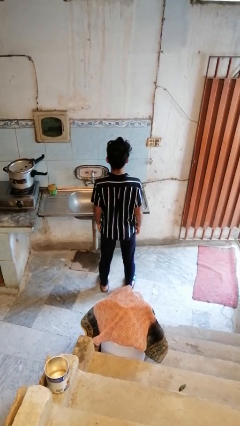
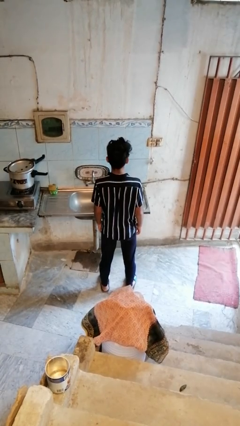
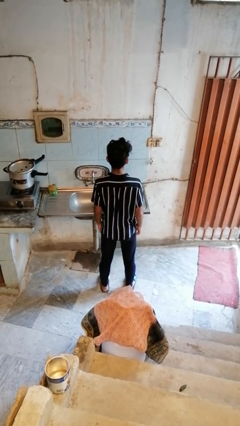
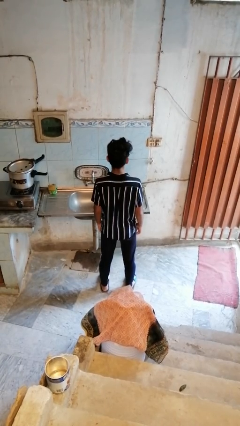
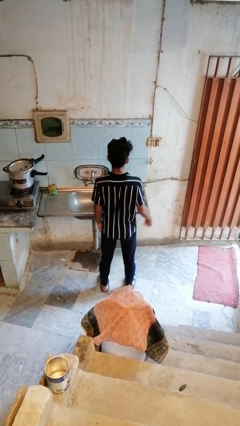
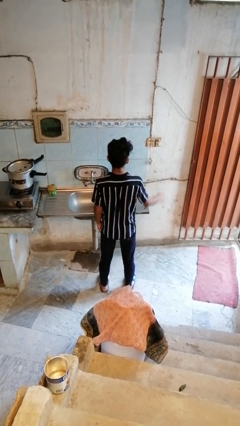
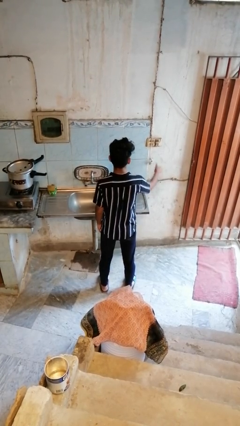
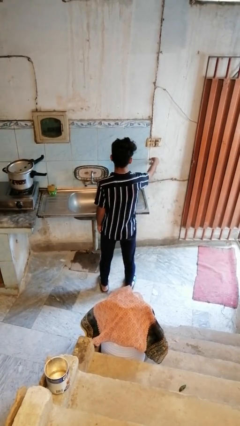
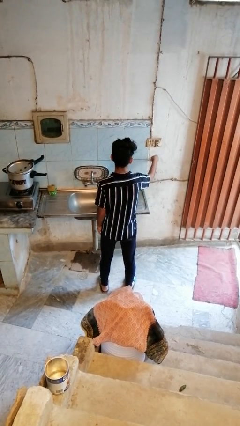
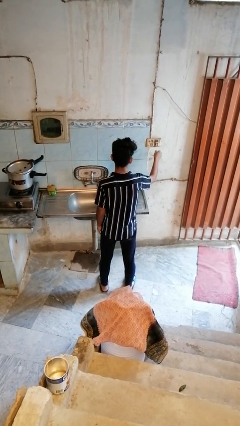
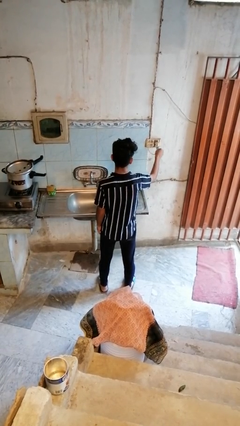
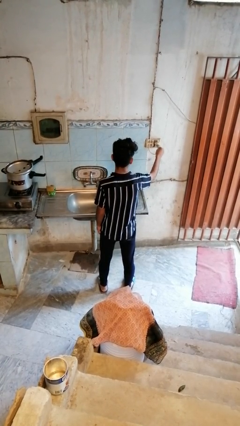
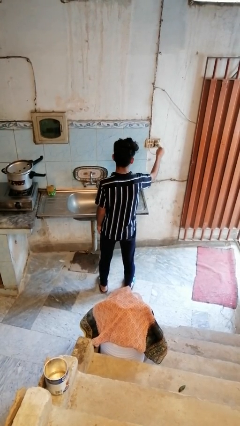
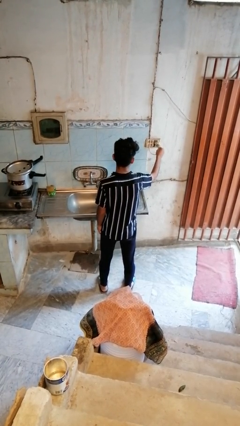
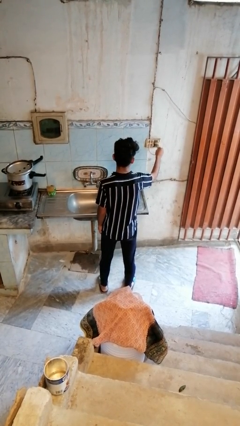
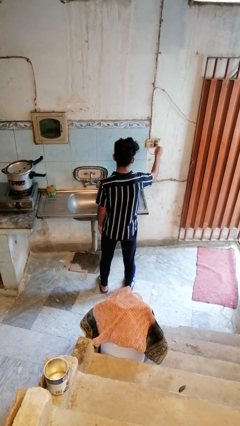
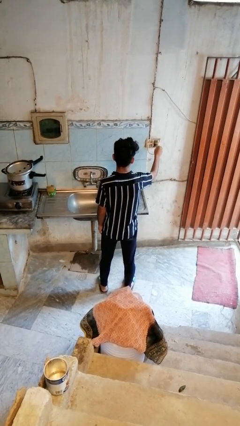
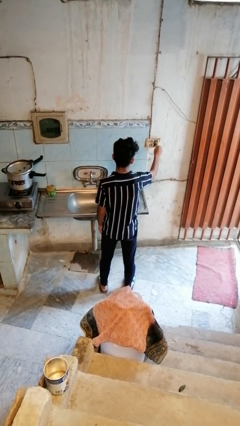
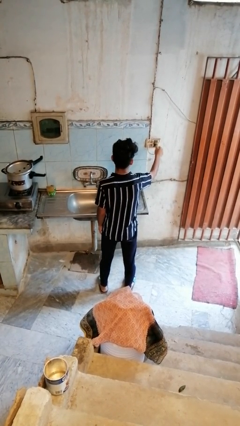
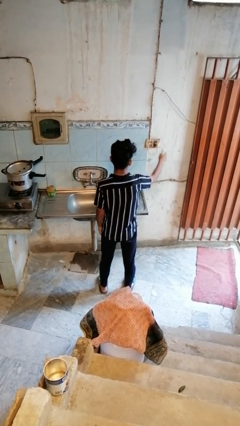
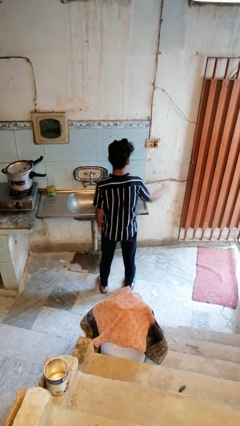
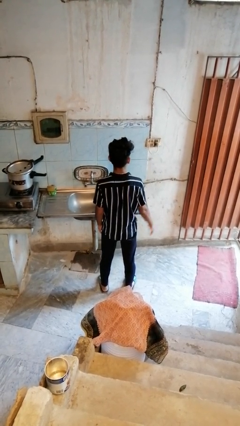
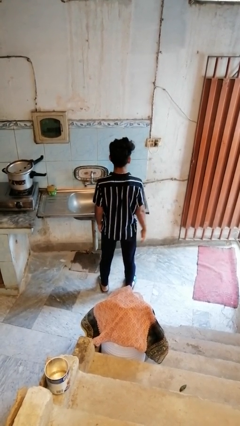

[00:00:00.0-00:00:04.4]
person plugs into electrical socket

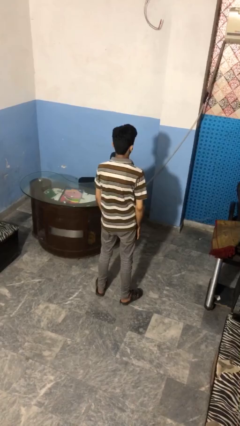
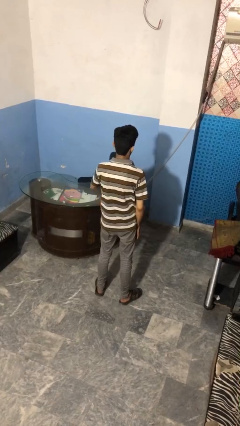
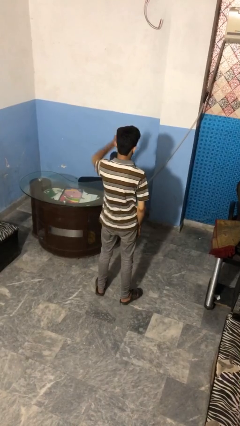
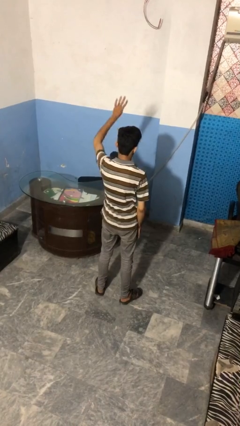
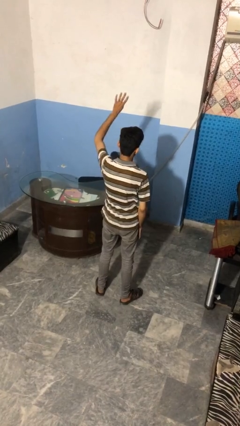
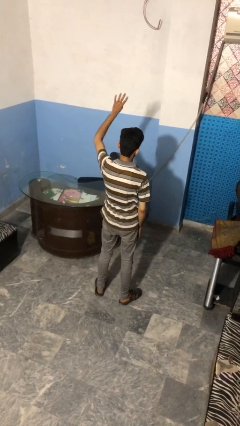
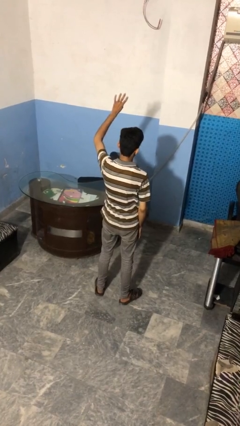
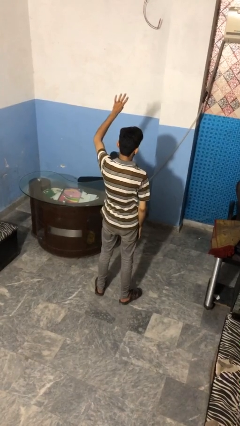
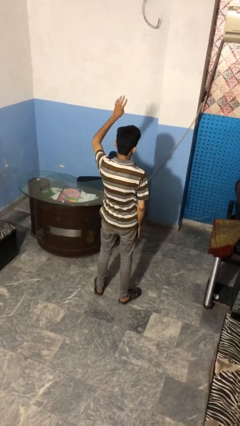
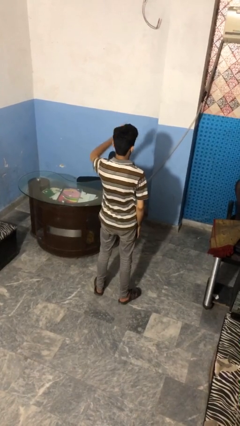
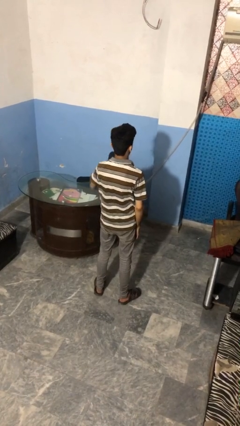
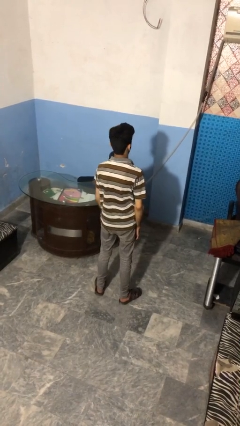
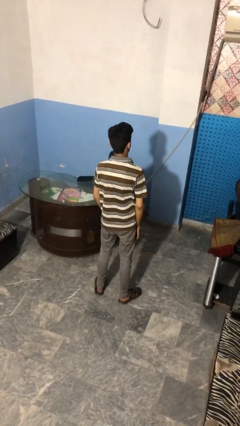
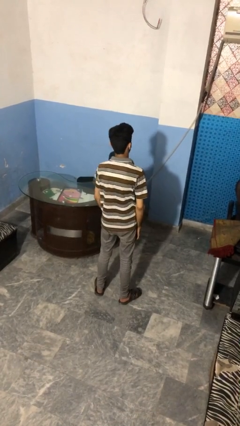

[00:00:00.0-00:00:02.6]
person gestures number four

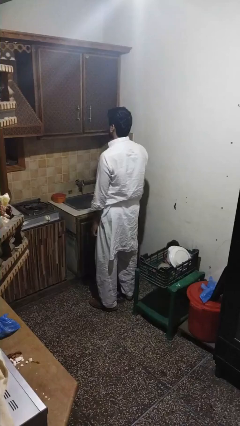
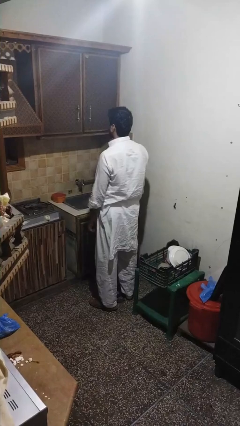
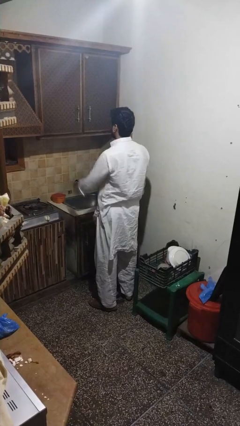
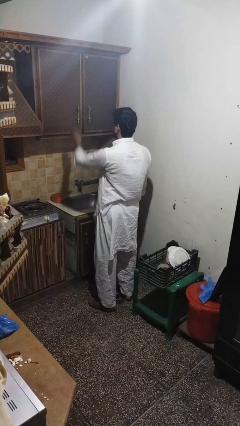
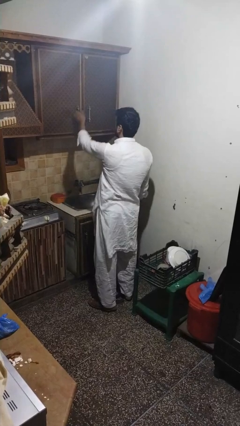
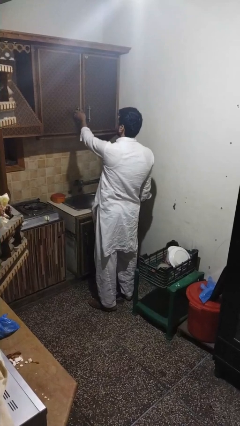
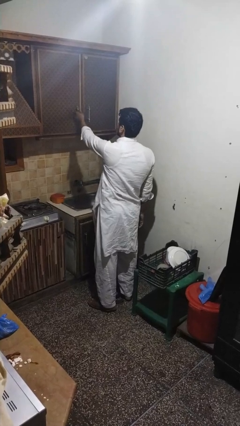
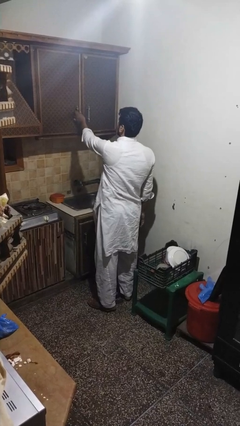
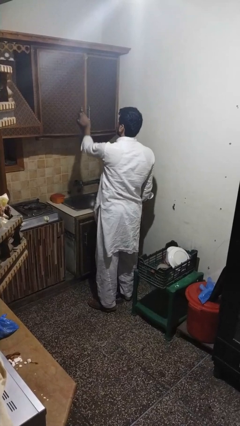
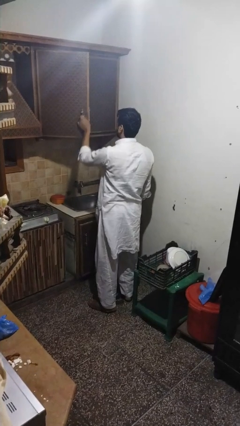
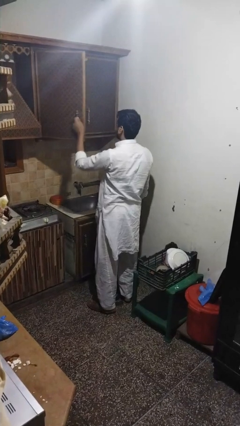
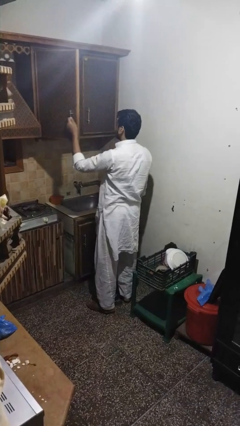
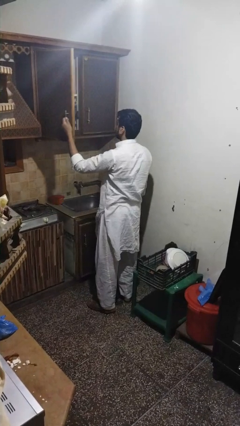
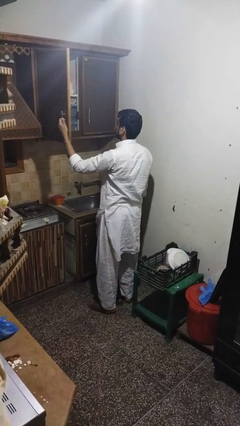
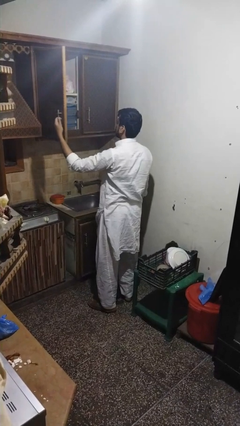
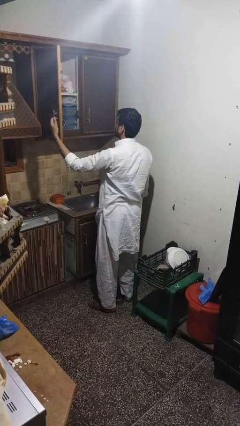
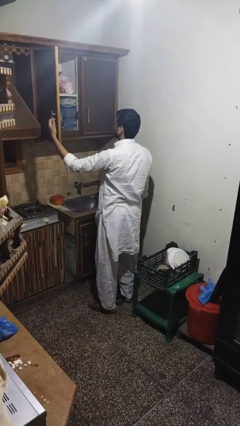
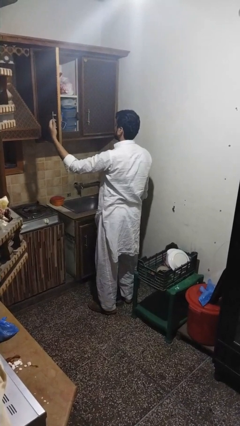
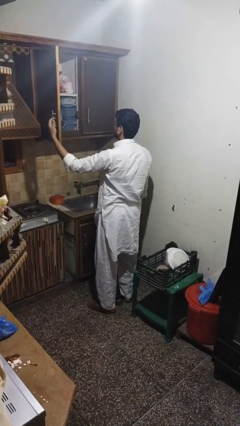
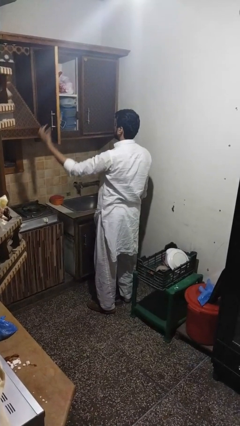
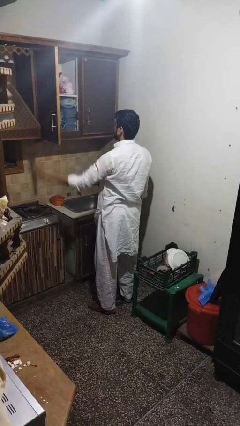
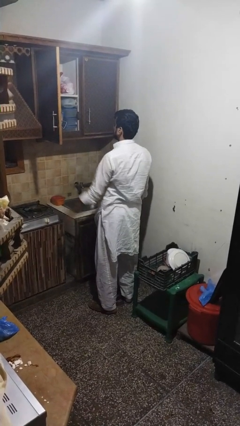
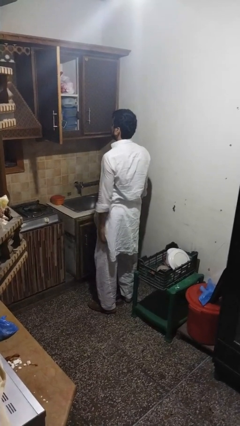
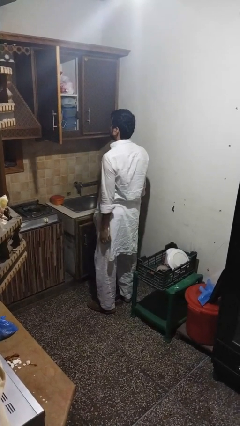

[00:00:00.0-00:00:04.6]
person opens cabinet

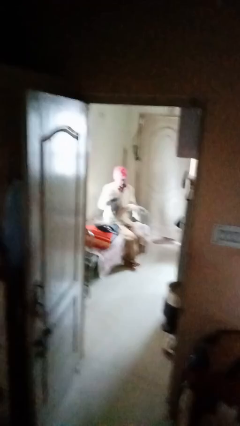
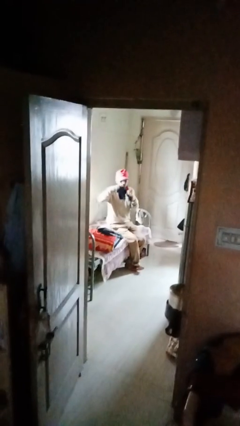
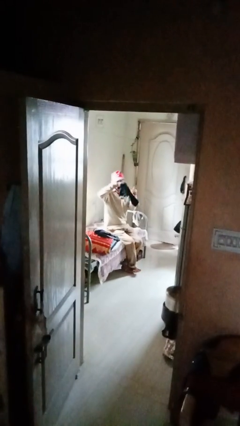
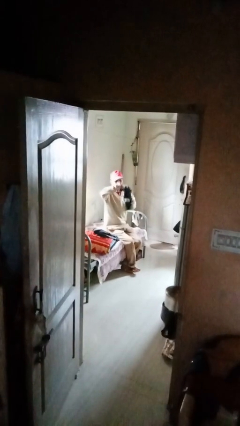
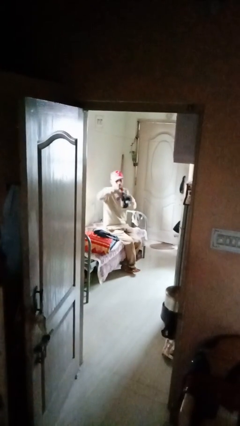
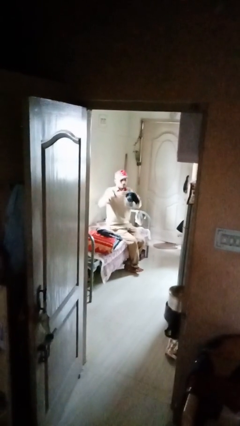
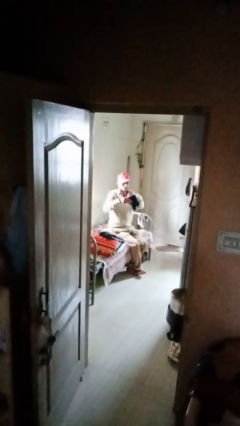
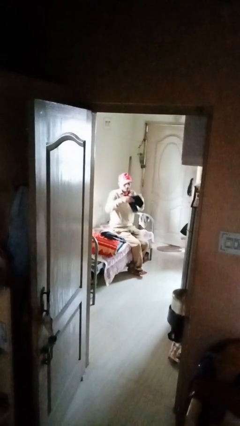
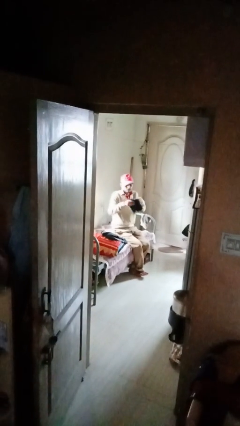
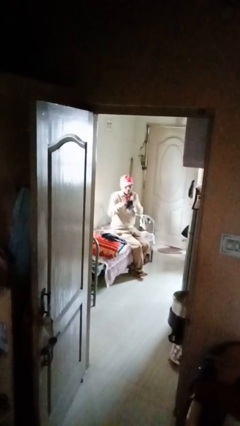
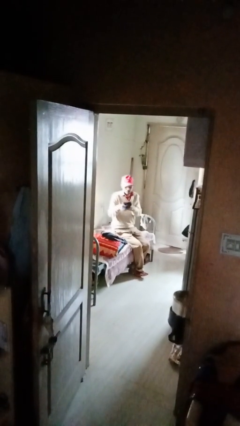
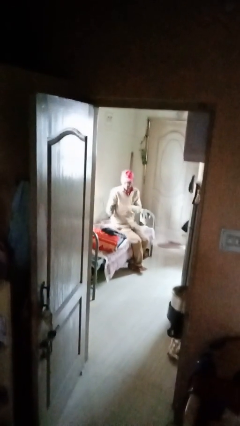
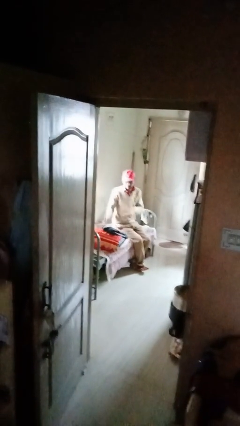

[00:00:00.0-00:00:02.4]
person folds socks

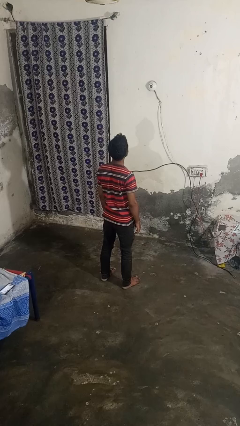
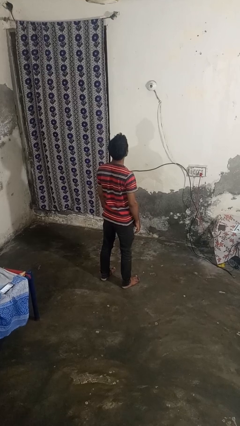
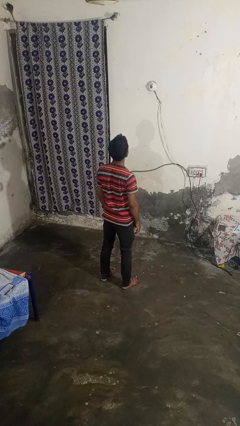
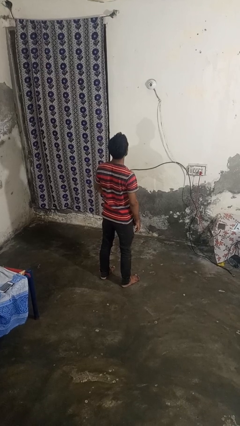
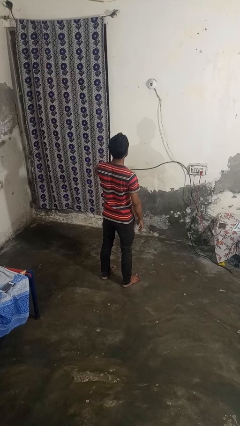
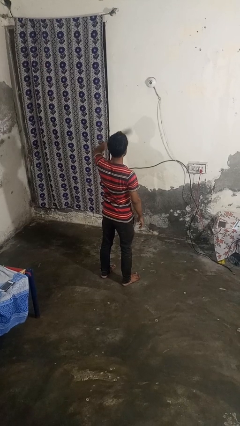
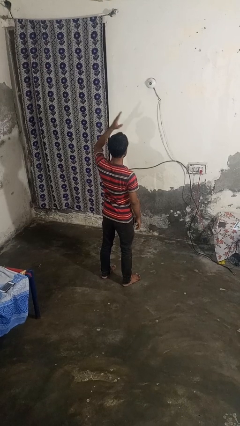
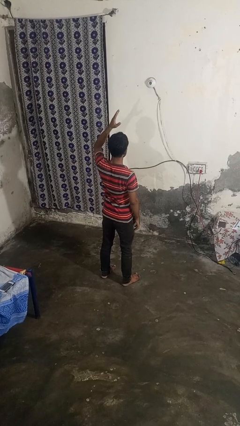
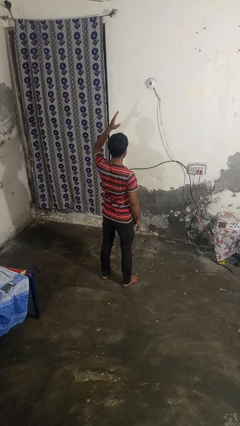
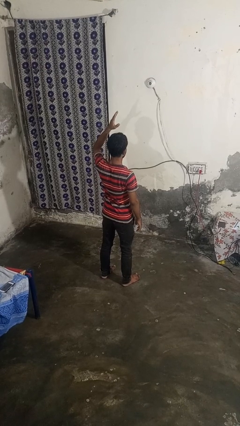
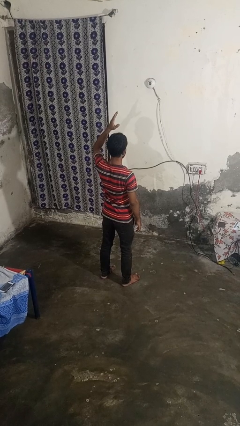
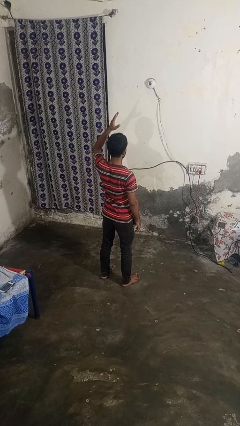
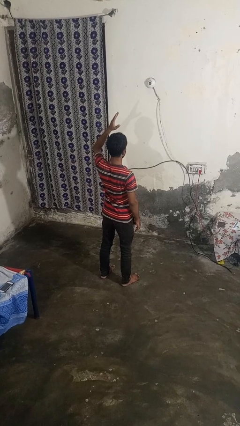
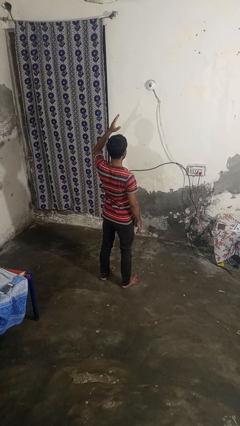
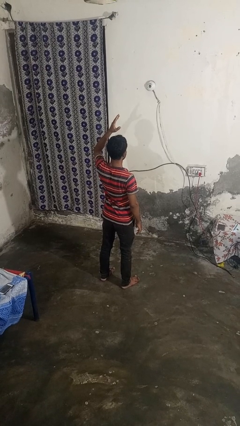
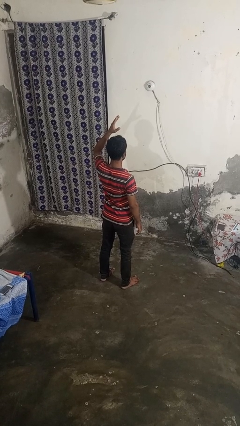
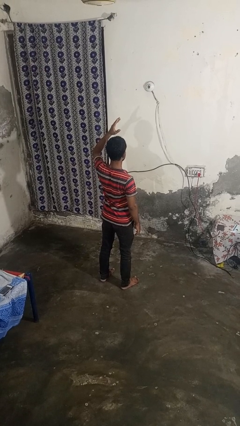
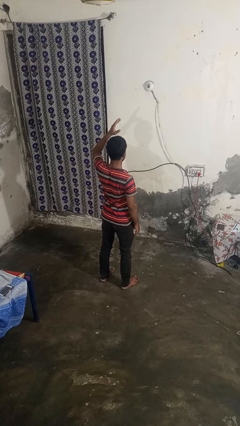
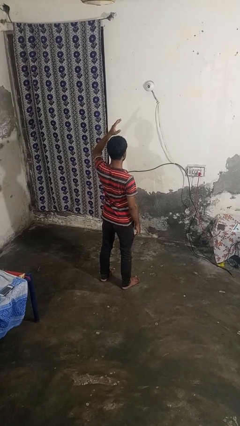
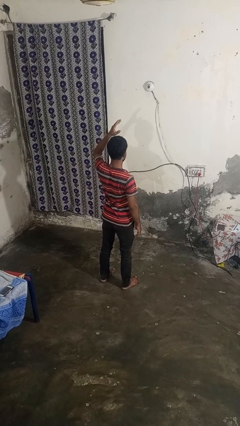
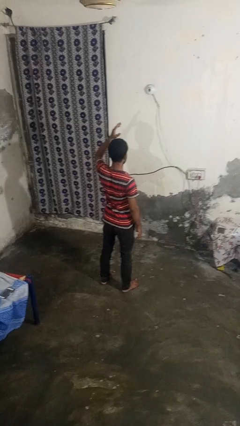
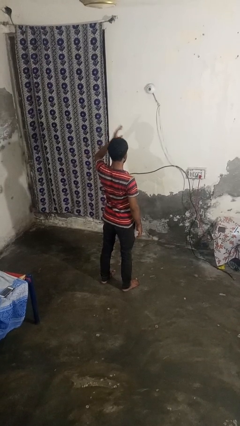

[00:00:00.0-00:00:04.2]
person gestures swipe up
